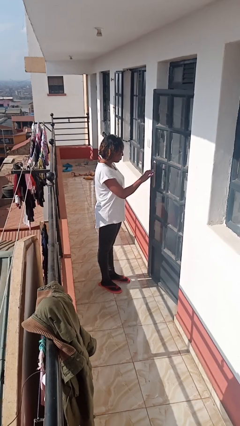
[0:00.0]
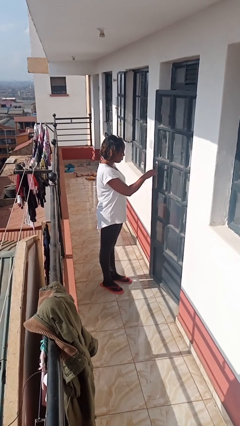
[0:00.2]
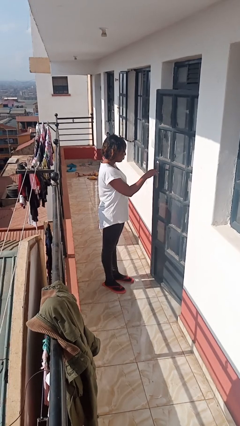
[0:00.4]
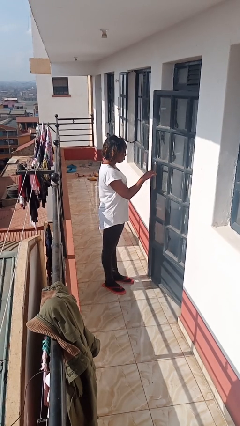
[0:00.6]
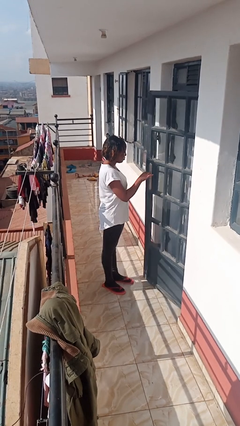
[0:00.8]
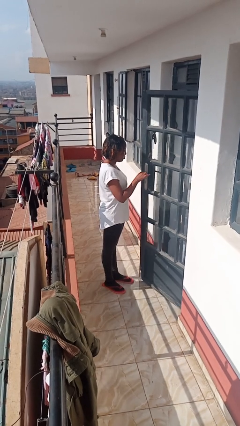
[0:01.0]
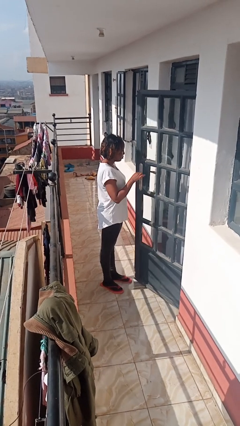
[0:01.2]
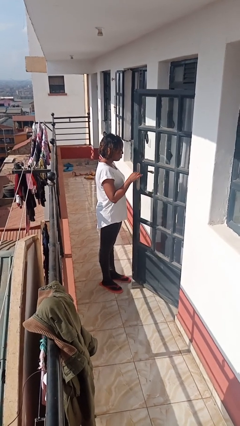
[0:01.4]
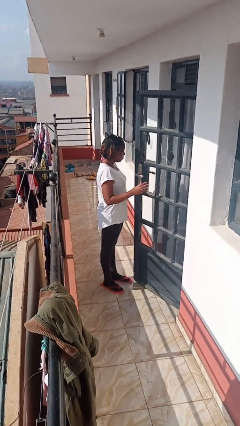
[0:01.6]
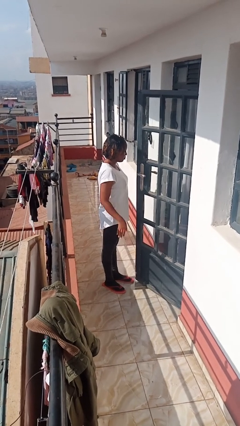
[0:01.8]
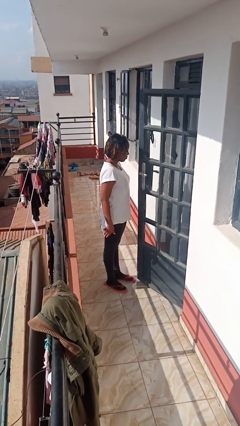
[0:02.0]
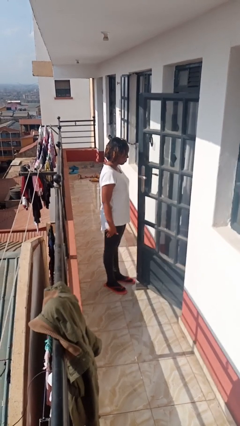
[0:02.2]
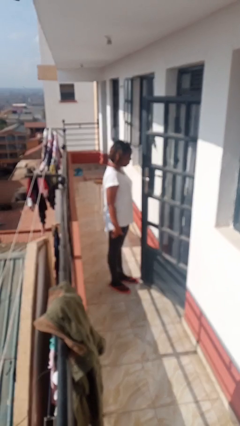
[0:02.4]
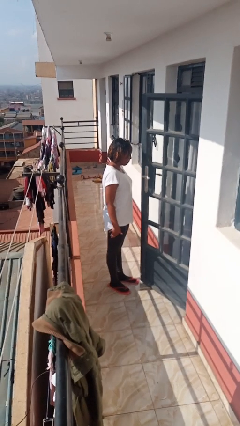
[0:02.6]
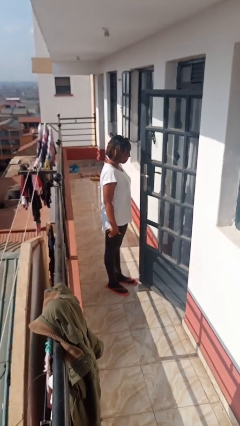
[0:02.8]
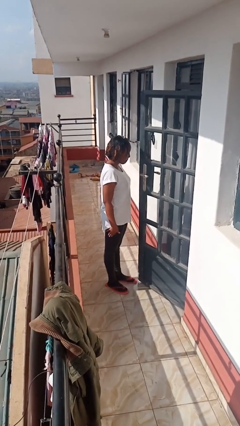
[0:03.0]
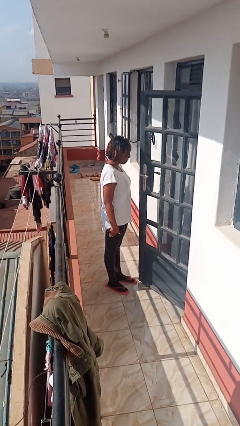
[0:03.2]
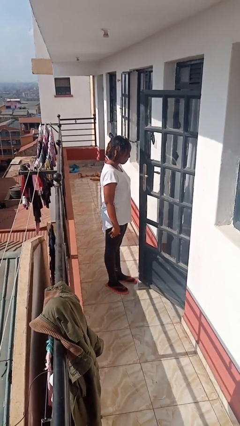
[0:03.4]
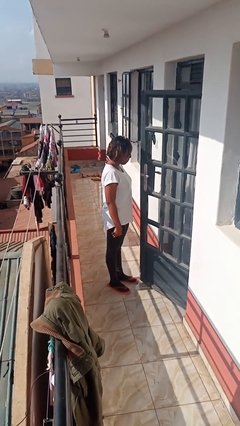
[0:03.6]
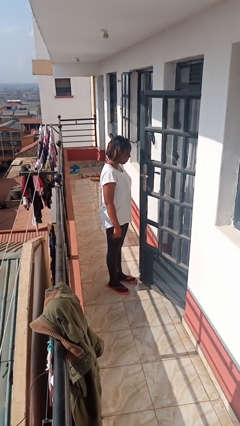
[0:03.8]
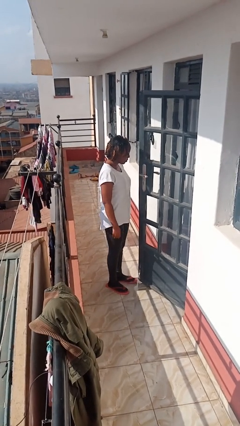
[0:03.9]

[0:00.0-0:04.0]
person opens facility door

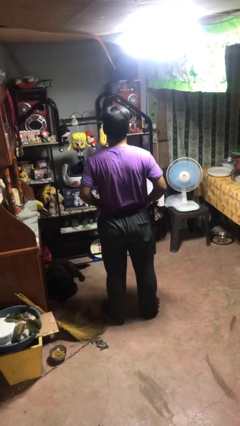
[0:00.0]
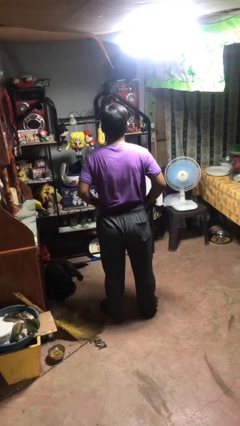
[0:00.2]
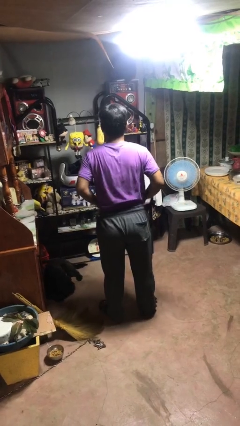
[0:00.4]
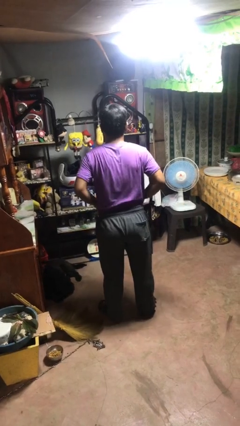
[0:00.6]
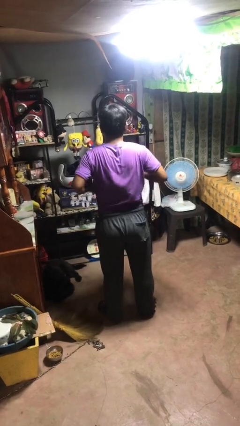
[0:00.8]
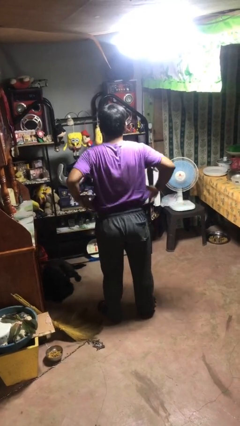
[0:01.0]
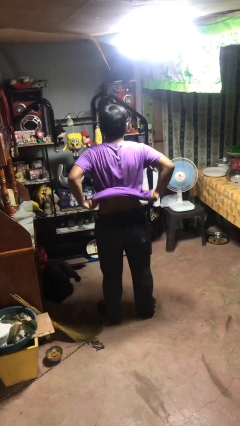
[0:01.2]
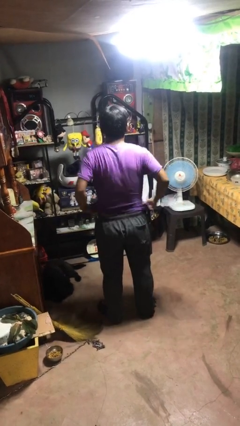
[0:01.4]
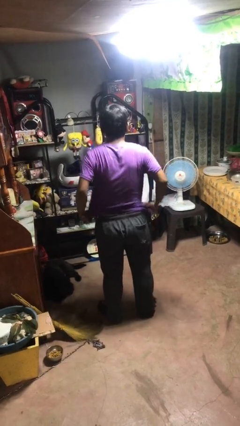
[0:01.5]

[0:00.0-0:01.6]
person untucks shirt

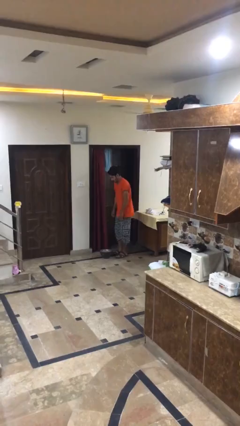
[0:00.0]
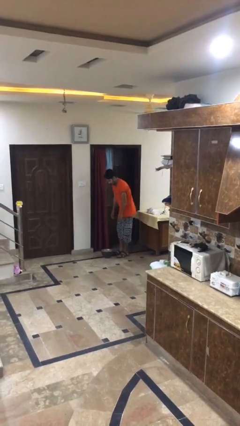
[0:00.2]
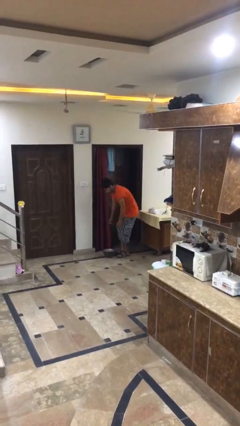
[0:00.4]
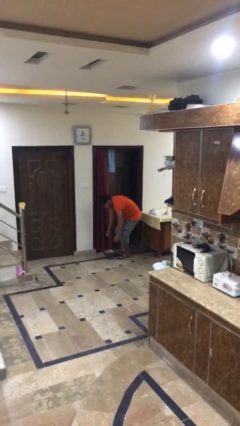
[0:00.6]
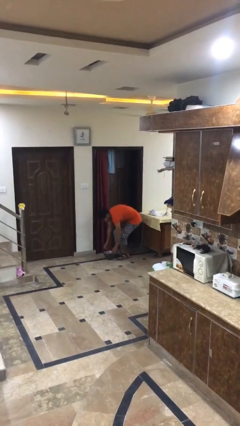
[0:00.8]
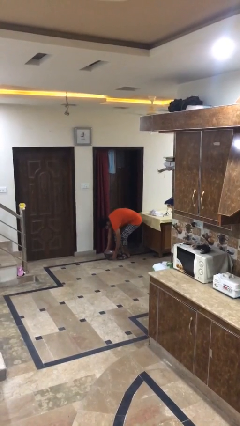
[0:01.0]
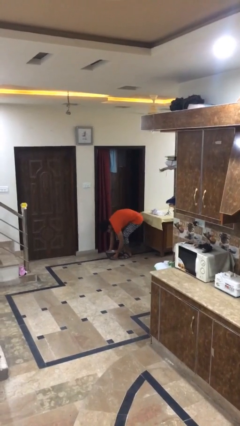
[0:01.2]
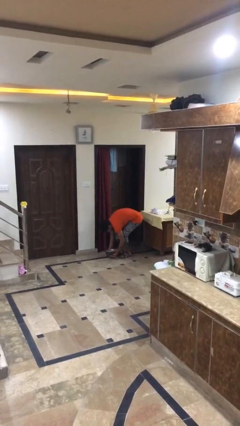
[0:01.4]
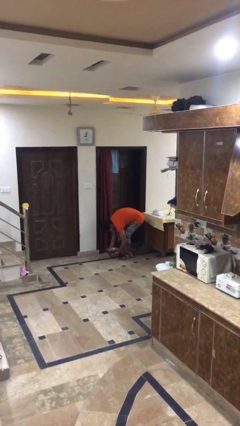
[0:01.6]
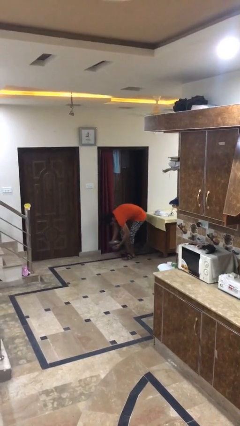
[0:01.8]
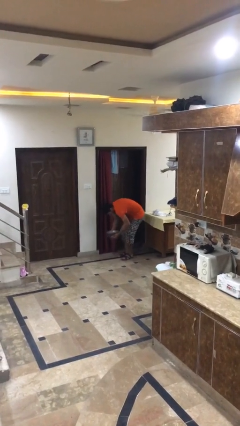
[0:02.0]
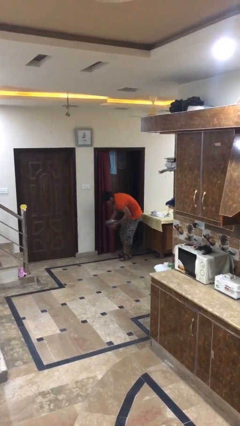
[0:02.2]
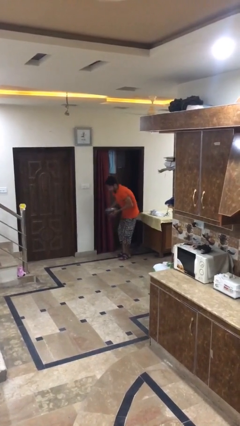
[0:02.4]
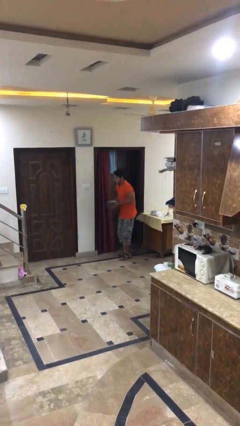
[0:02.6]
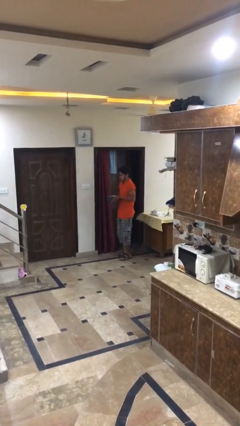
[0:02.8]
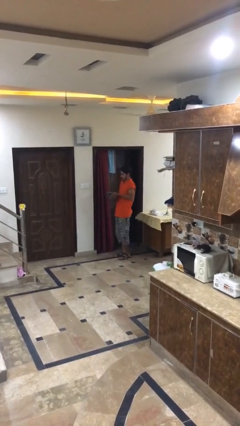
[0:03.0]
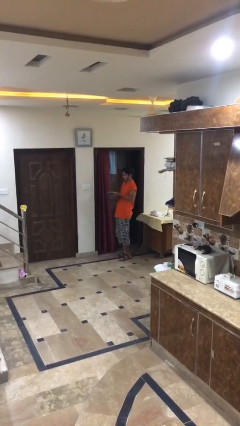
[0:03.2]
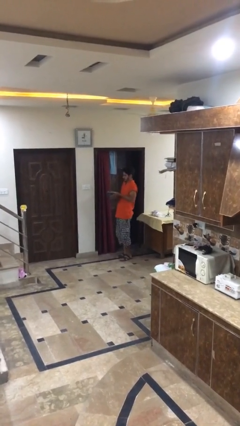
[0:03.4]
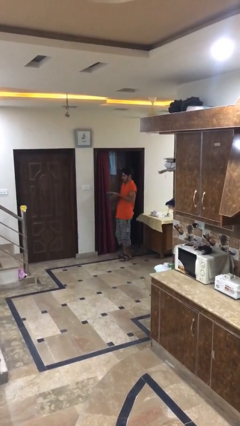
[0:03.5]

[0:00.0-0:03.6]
person picks up object from floor

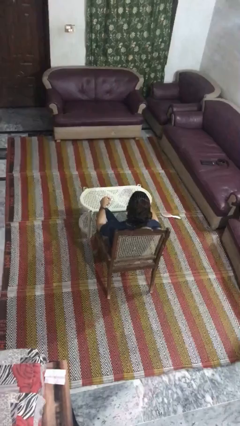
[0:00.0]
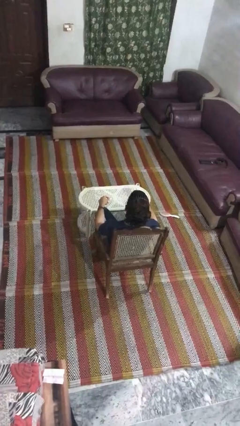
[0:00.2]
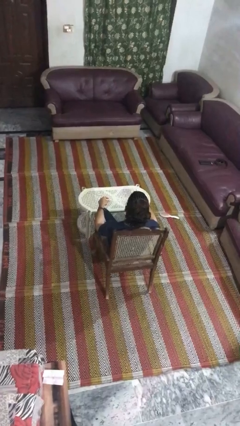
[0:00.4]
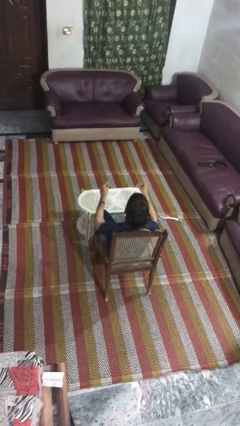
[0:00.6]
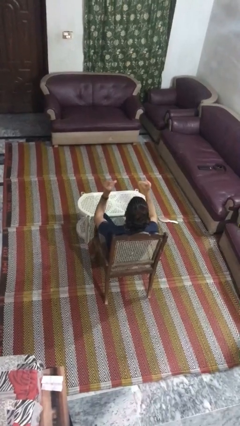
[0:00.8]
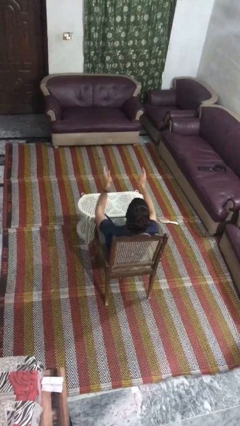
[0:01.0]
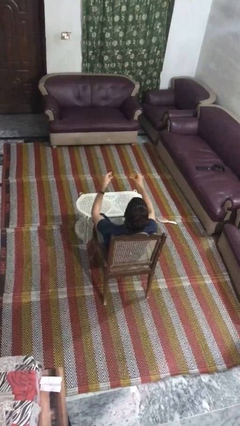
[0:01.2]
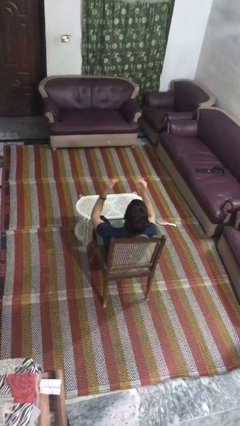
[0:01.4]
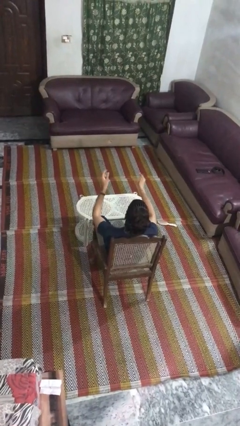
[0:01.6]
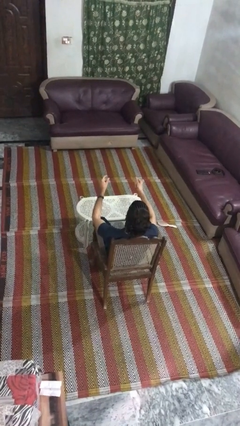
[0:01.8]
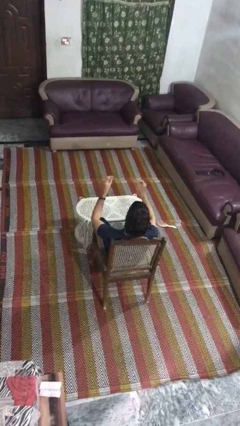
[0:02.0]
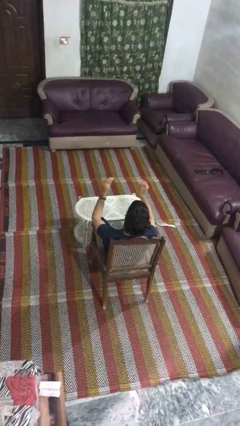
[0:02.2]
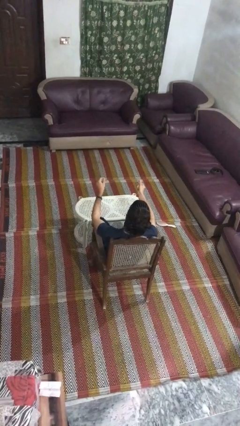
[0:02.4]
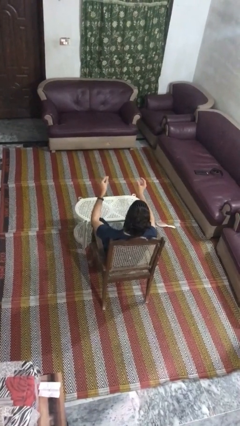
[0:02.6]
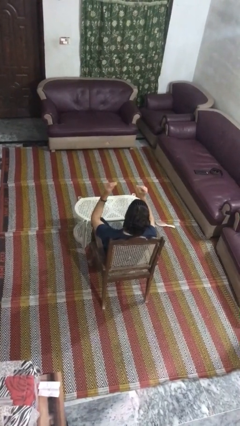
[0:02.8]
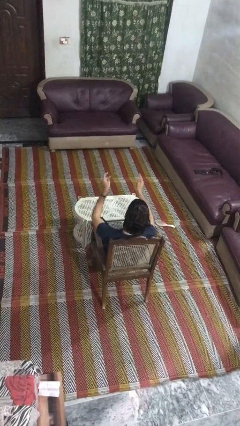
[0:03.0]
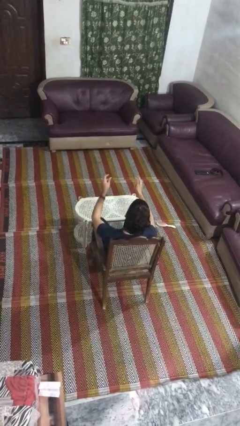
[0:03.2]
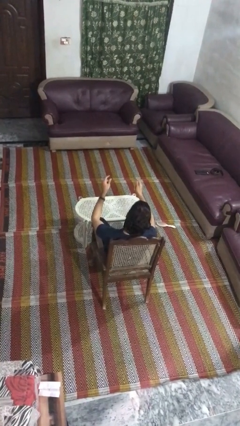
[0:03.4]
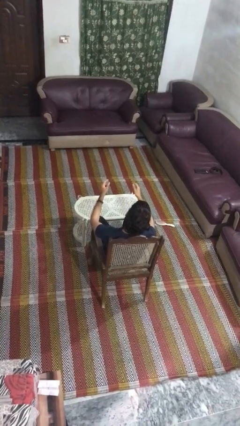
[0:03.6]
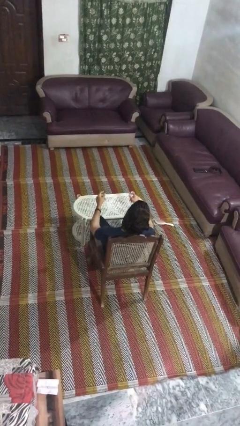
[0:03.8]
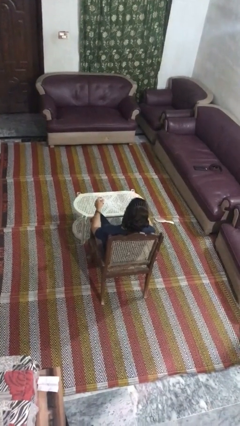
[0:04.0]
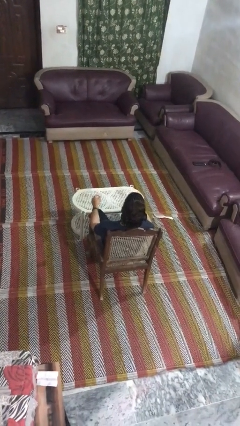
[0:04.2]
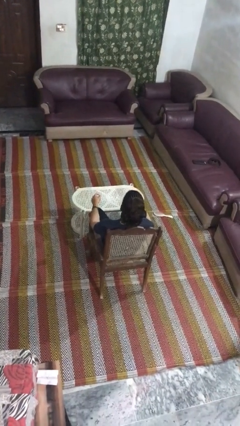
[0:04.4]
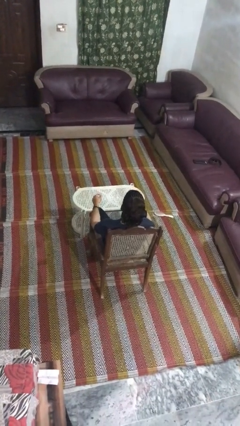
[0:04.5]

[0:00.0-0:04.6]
person snaps fingers

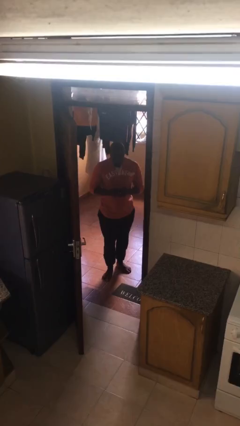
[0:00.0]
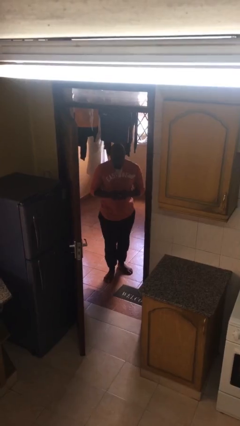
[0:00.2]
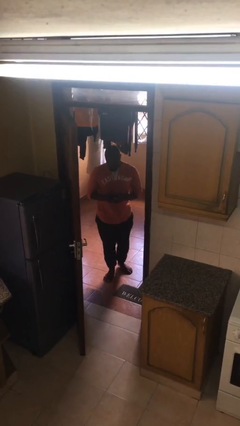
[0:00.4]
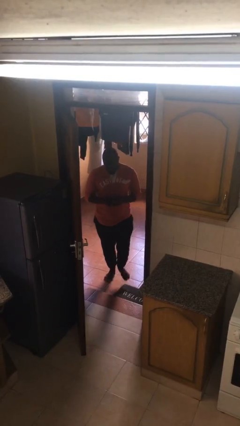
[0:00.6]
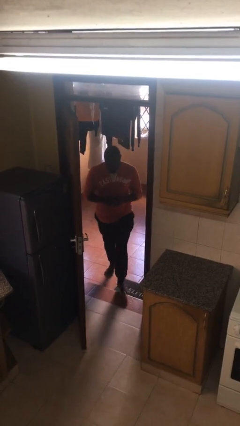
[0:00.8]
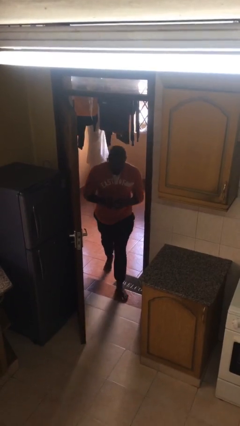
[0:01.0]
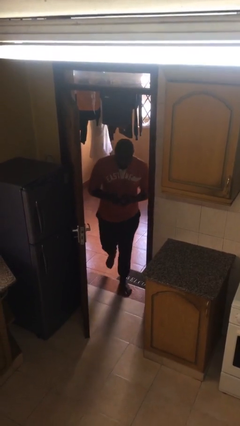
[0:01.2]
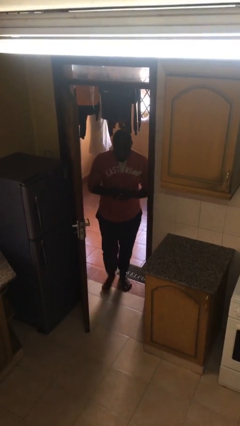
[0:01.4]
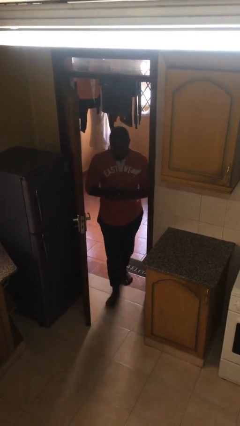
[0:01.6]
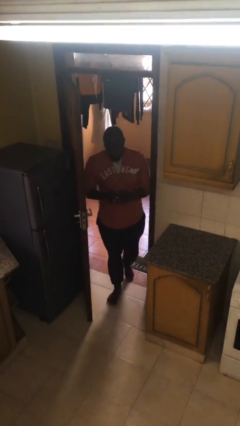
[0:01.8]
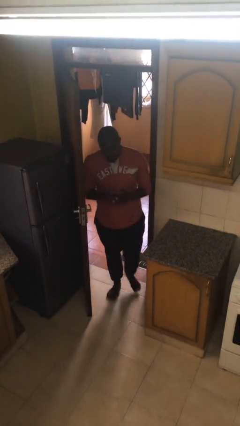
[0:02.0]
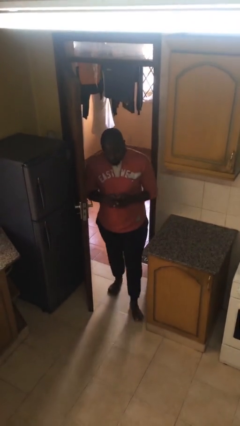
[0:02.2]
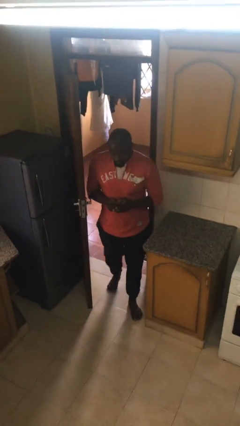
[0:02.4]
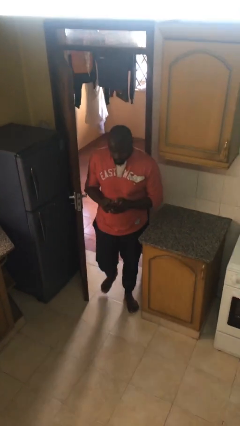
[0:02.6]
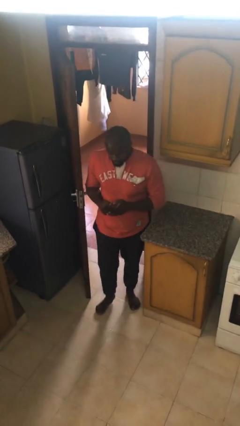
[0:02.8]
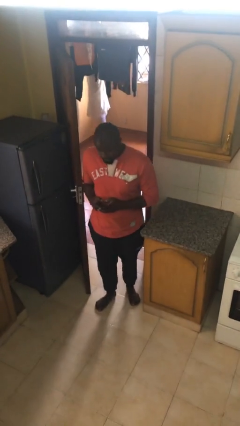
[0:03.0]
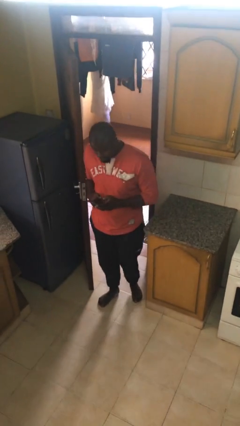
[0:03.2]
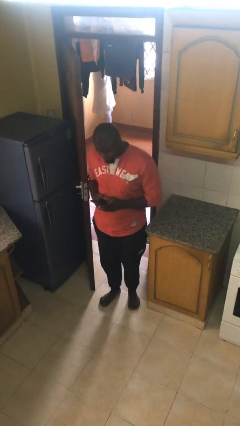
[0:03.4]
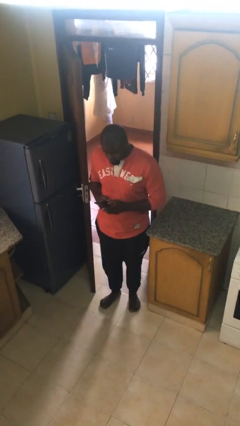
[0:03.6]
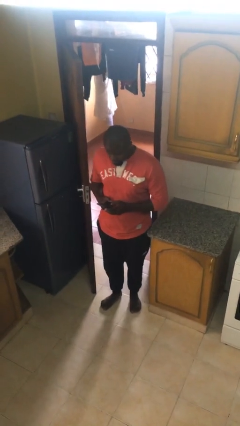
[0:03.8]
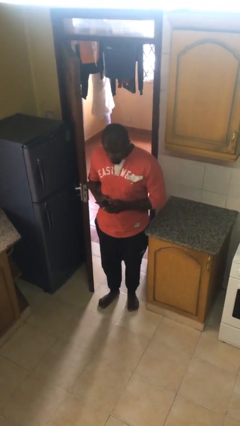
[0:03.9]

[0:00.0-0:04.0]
person enters scene through structure
